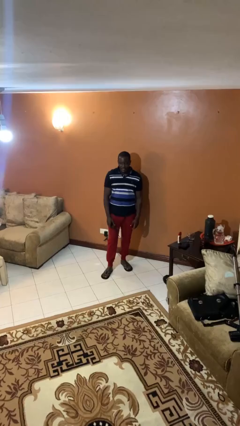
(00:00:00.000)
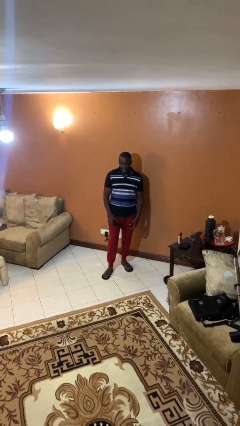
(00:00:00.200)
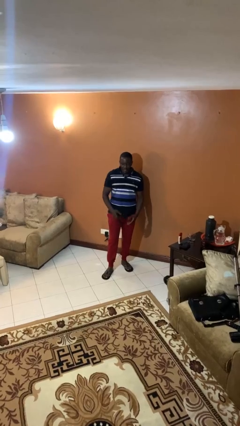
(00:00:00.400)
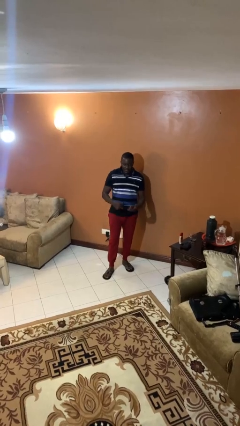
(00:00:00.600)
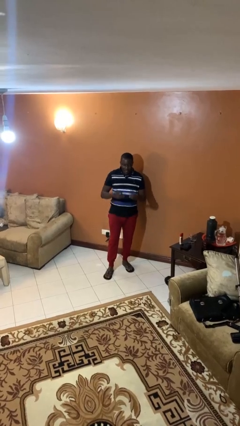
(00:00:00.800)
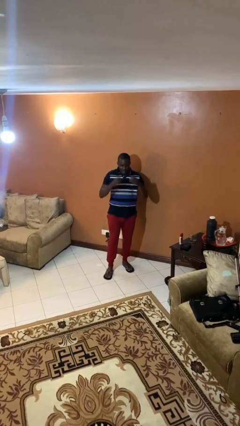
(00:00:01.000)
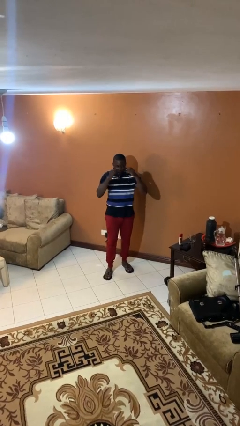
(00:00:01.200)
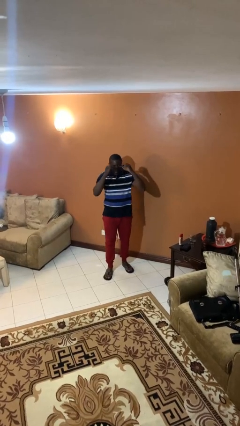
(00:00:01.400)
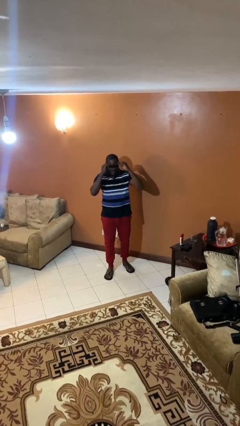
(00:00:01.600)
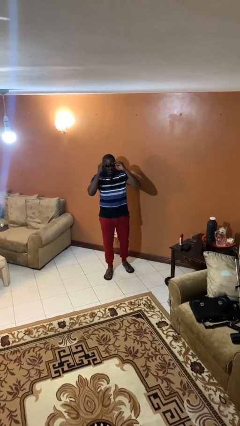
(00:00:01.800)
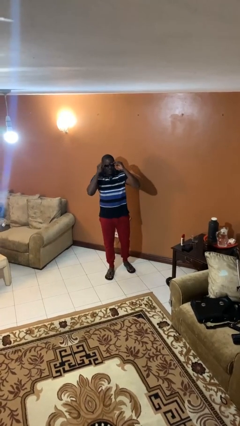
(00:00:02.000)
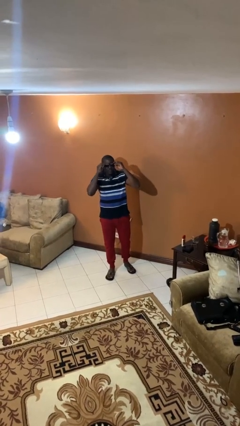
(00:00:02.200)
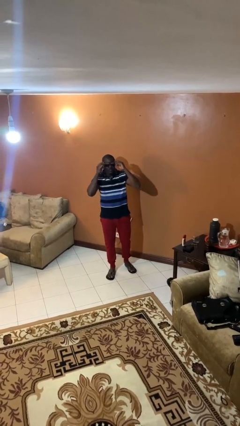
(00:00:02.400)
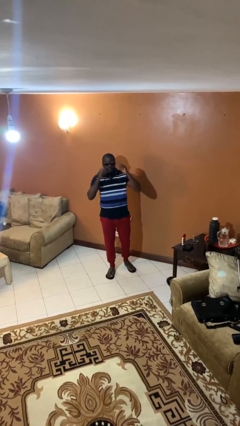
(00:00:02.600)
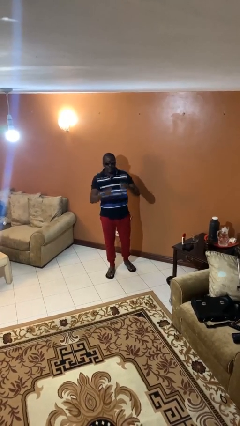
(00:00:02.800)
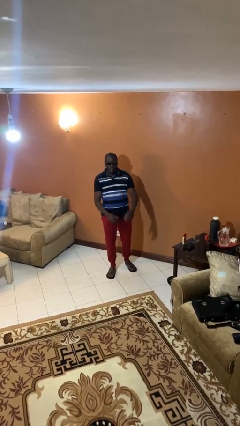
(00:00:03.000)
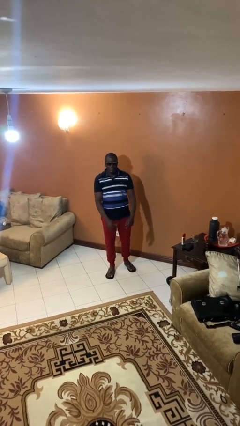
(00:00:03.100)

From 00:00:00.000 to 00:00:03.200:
person puts on sunglasses

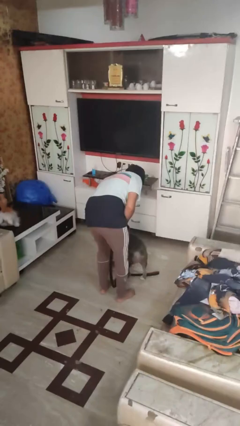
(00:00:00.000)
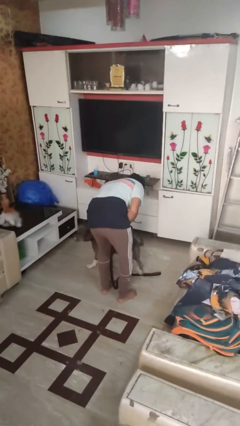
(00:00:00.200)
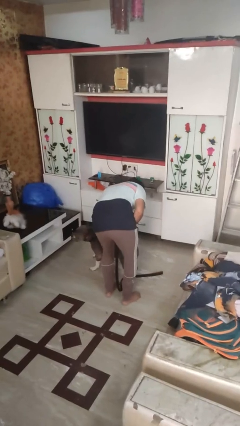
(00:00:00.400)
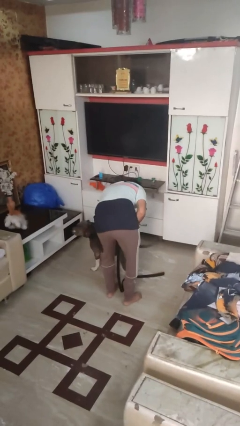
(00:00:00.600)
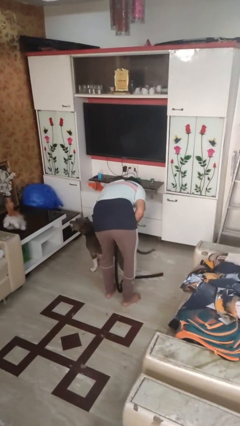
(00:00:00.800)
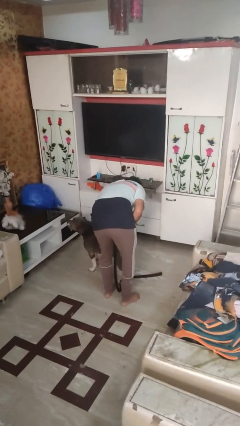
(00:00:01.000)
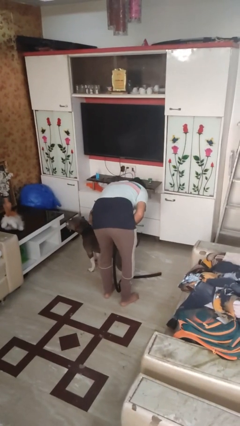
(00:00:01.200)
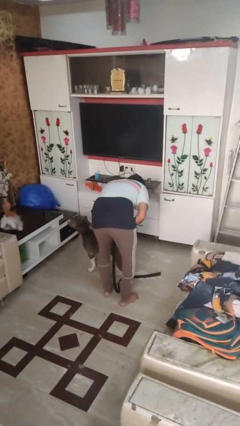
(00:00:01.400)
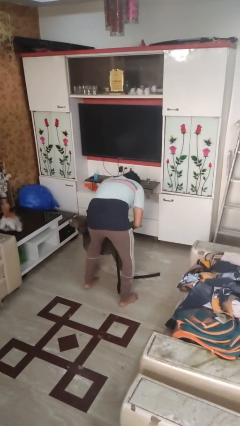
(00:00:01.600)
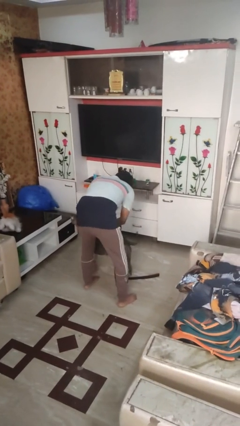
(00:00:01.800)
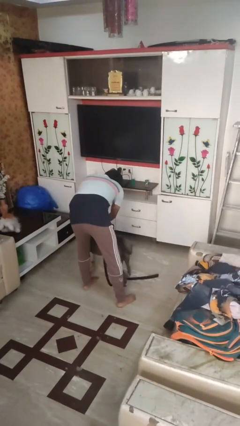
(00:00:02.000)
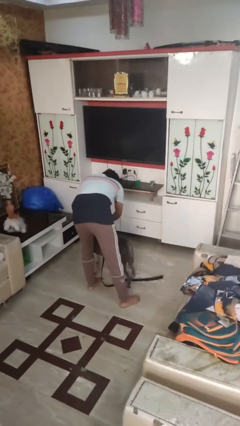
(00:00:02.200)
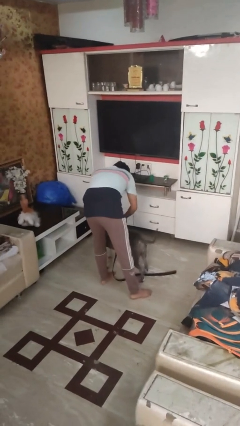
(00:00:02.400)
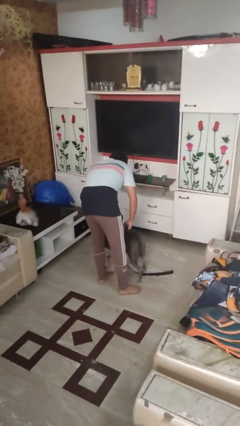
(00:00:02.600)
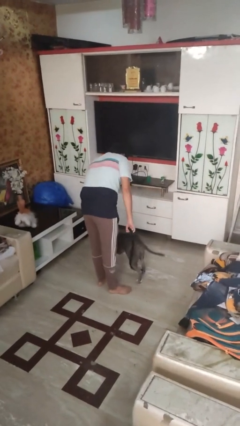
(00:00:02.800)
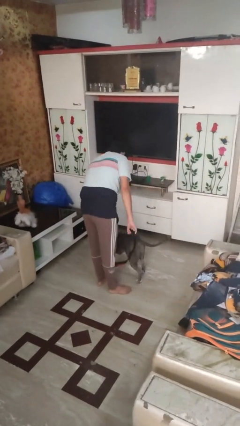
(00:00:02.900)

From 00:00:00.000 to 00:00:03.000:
person attaches leash to dog

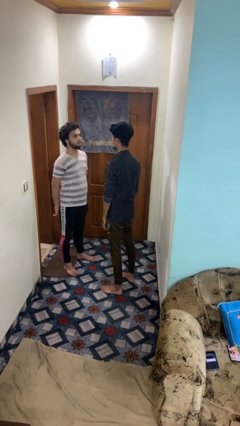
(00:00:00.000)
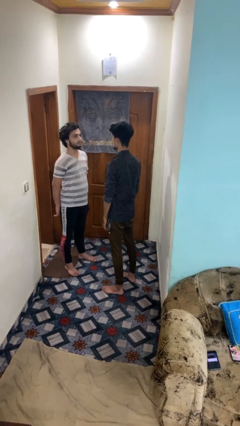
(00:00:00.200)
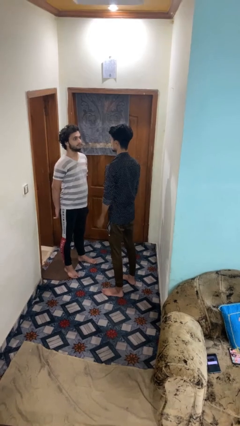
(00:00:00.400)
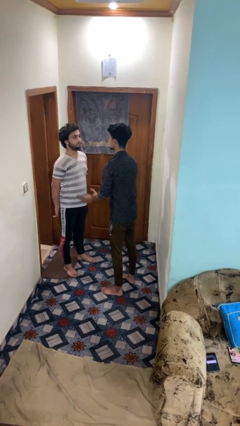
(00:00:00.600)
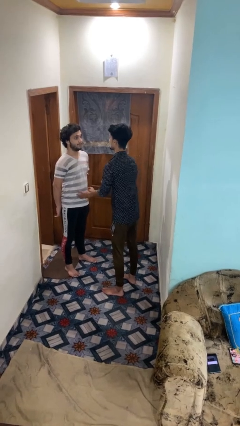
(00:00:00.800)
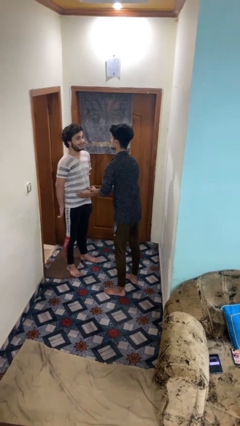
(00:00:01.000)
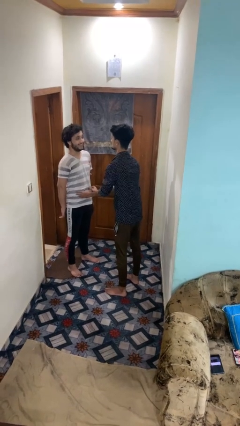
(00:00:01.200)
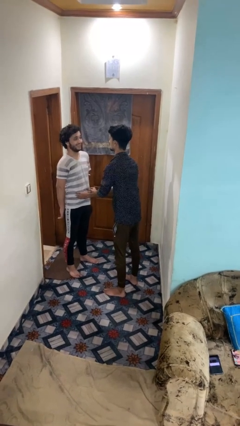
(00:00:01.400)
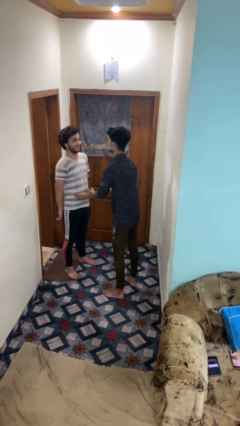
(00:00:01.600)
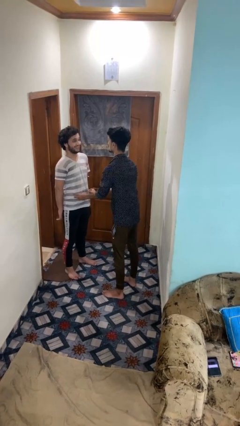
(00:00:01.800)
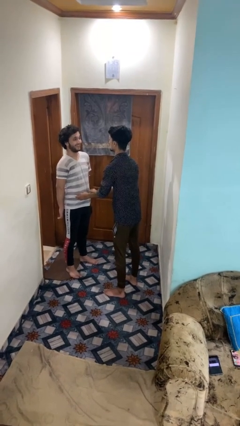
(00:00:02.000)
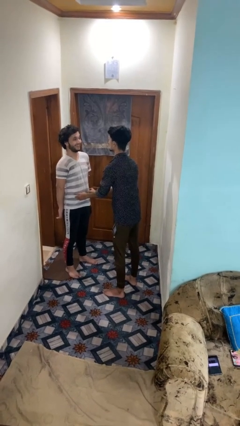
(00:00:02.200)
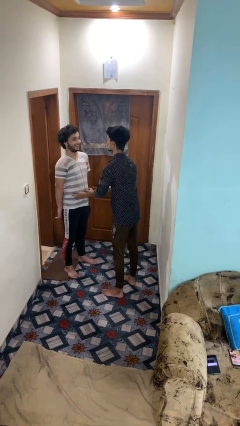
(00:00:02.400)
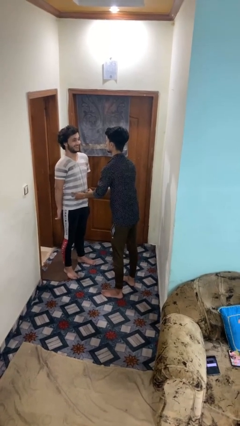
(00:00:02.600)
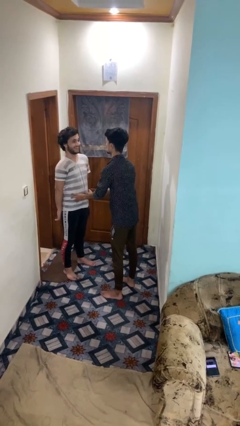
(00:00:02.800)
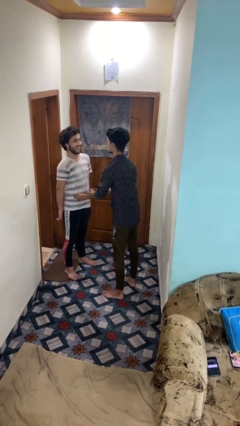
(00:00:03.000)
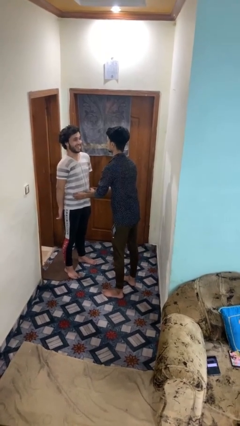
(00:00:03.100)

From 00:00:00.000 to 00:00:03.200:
person tickles person

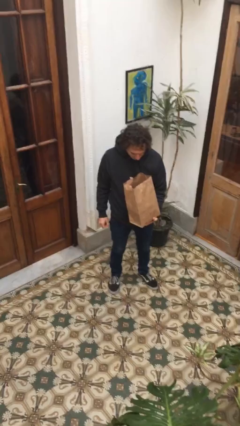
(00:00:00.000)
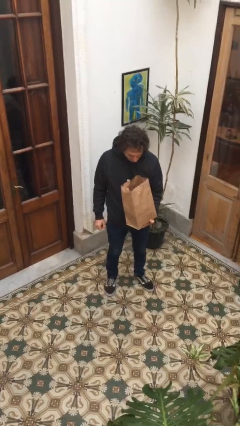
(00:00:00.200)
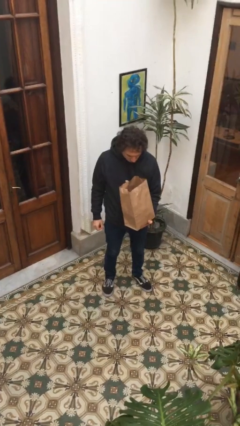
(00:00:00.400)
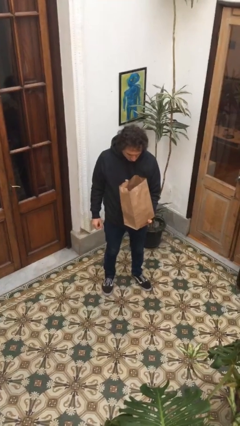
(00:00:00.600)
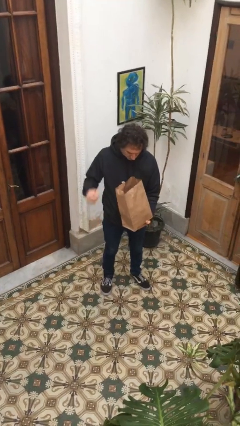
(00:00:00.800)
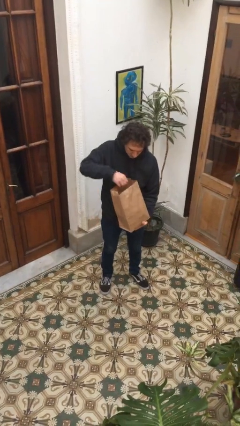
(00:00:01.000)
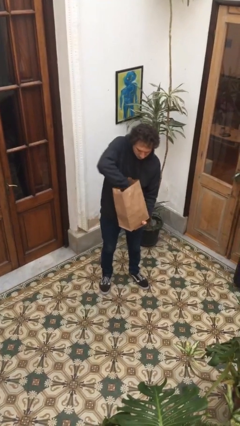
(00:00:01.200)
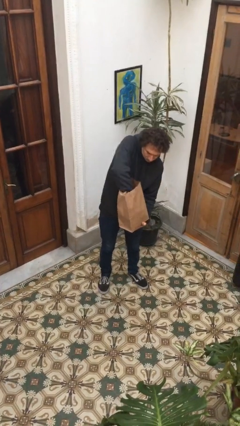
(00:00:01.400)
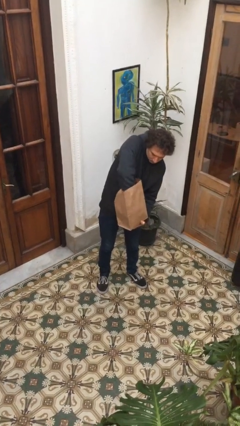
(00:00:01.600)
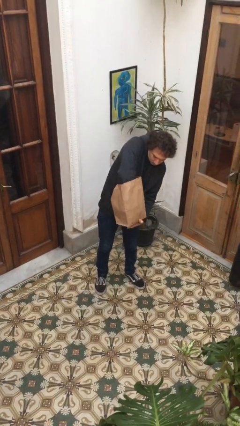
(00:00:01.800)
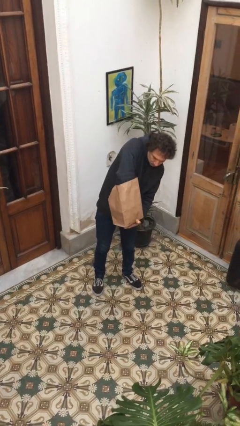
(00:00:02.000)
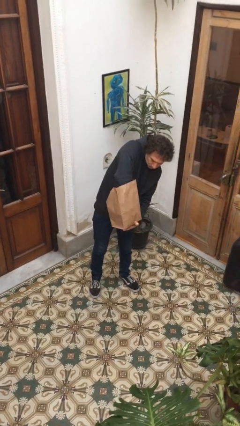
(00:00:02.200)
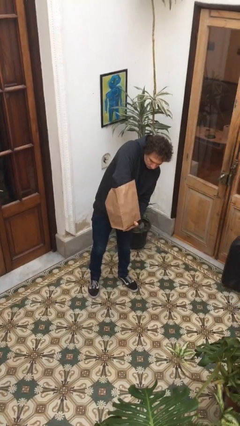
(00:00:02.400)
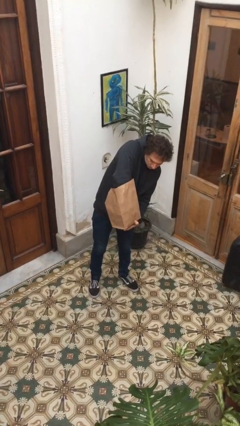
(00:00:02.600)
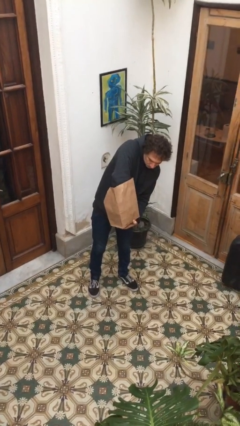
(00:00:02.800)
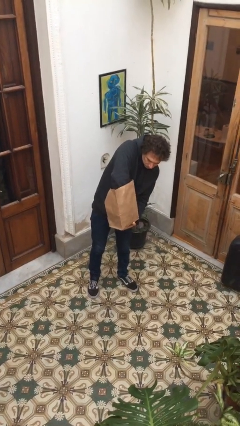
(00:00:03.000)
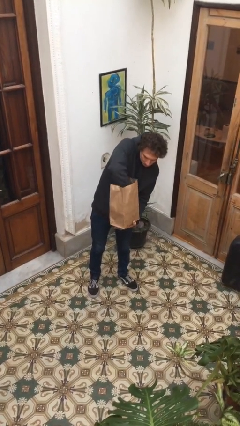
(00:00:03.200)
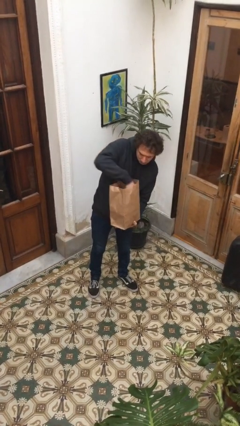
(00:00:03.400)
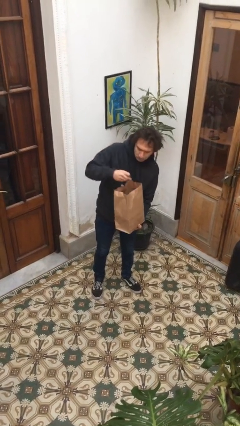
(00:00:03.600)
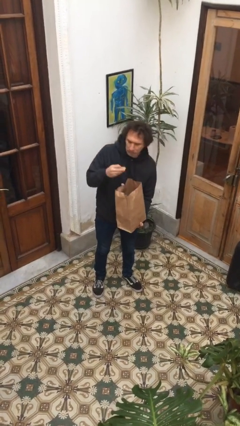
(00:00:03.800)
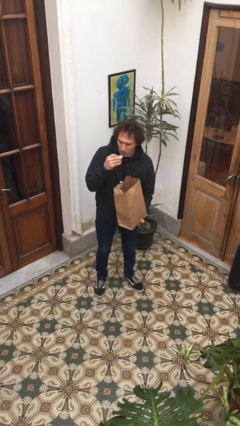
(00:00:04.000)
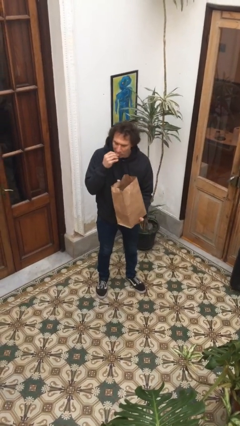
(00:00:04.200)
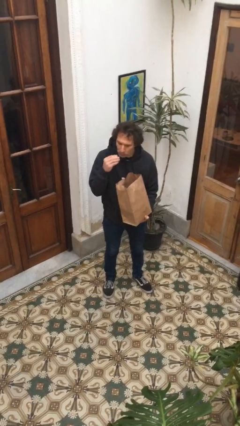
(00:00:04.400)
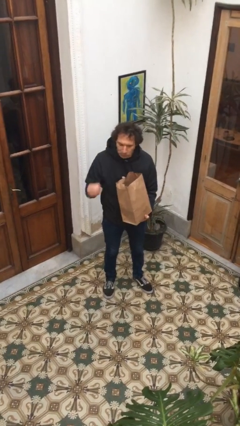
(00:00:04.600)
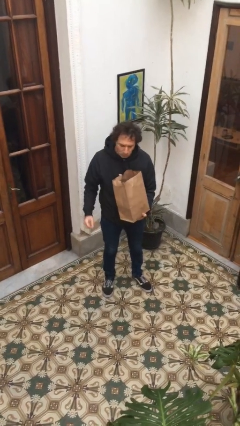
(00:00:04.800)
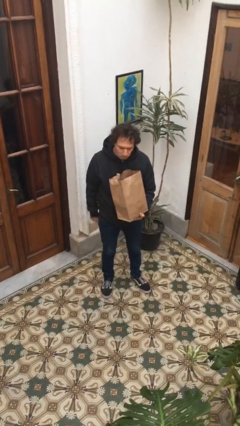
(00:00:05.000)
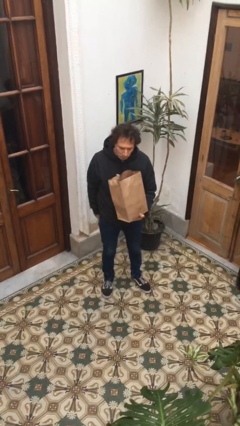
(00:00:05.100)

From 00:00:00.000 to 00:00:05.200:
person eats snack from bag

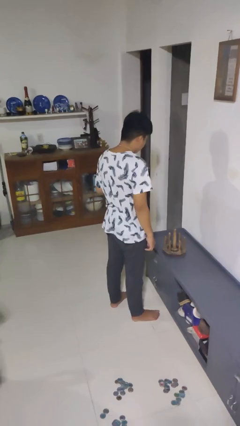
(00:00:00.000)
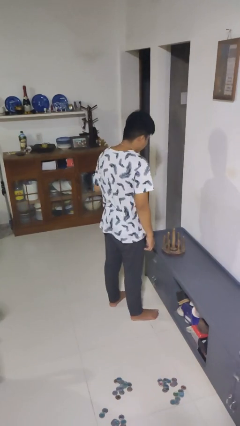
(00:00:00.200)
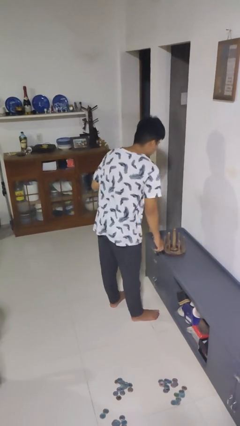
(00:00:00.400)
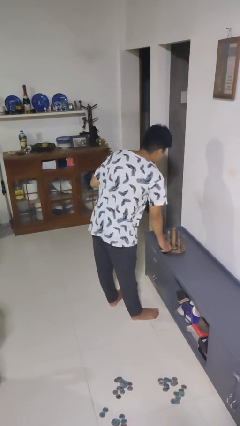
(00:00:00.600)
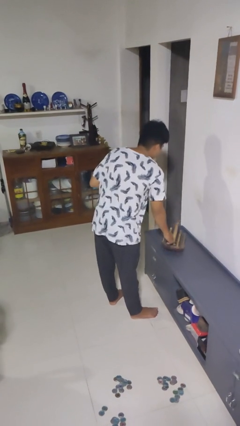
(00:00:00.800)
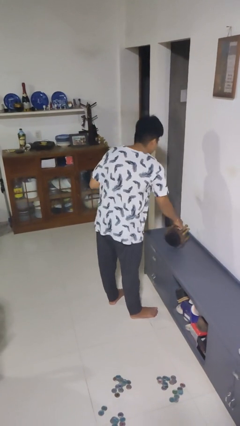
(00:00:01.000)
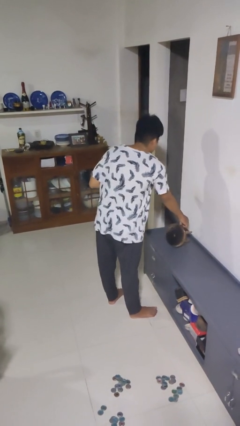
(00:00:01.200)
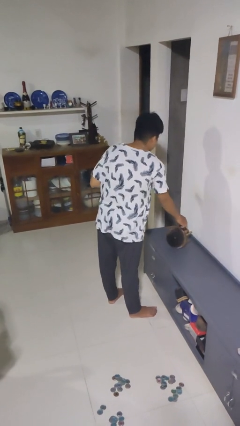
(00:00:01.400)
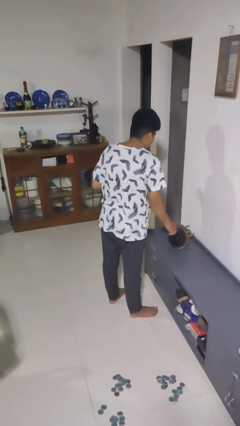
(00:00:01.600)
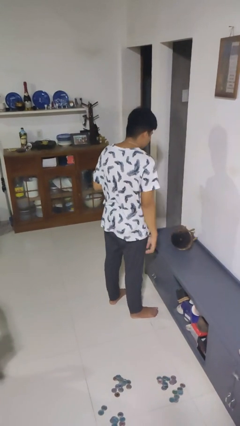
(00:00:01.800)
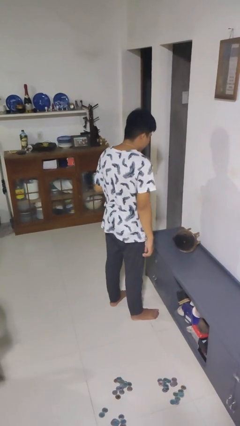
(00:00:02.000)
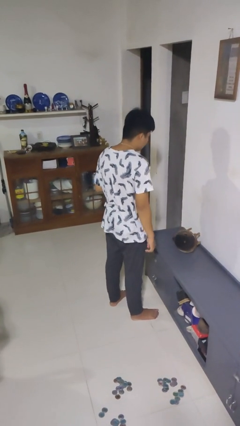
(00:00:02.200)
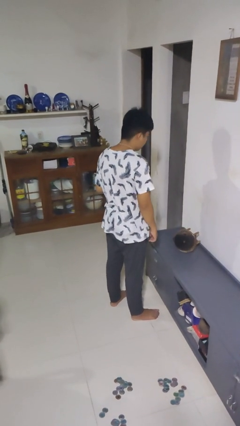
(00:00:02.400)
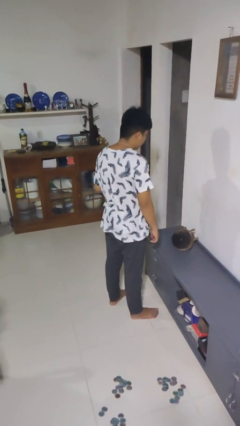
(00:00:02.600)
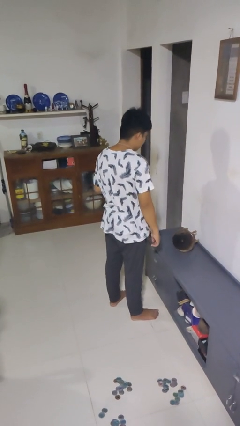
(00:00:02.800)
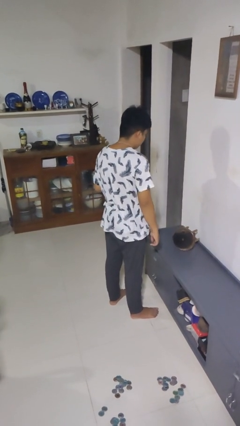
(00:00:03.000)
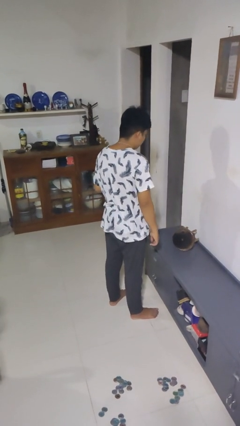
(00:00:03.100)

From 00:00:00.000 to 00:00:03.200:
person knocks over furniture
